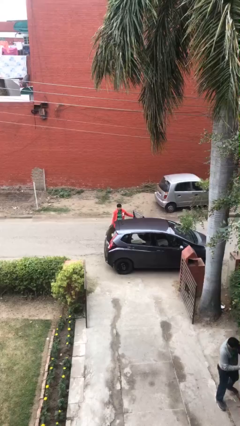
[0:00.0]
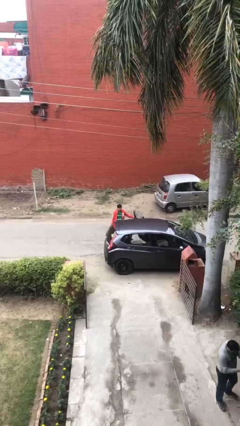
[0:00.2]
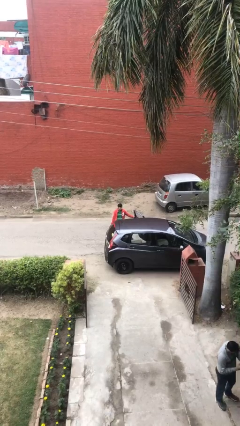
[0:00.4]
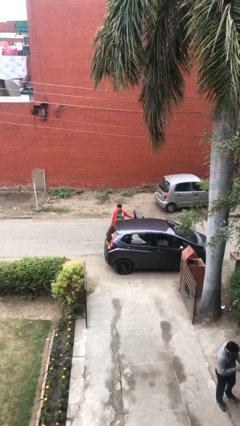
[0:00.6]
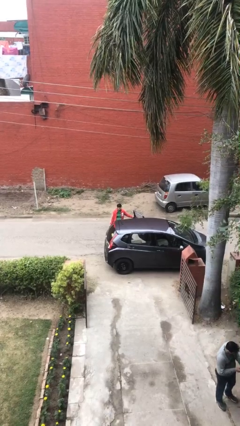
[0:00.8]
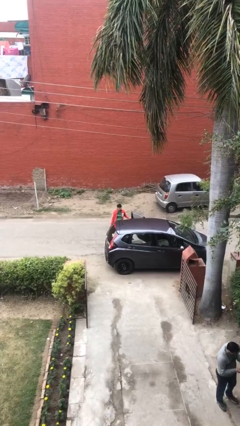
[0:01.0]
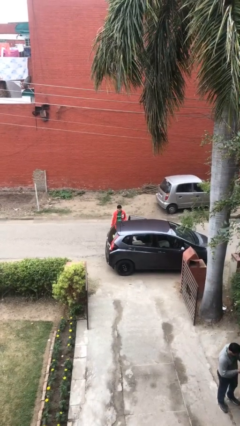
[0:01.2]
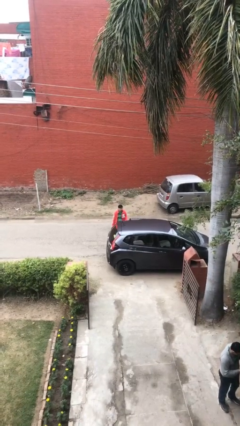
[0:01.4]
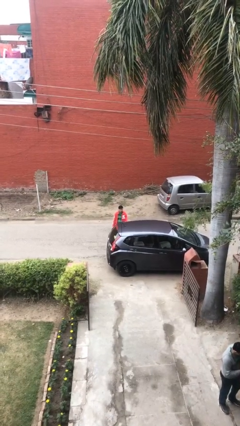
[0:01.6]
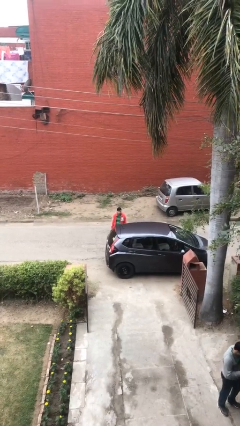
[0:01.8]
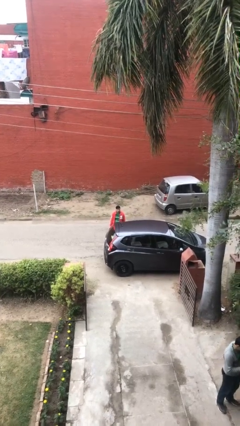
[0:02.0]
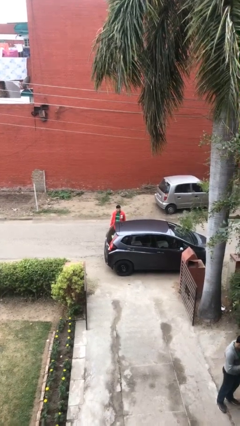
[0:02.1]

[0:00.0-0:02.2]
person closes car door

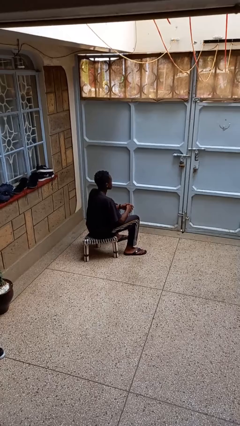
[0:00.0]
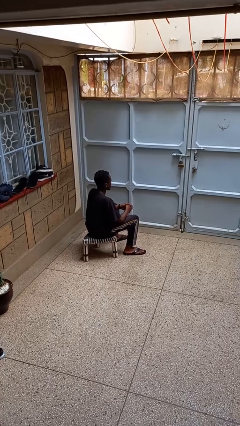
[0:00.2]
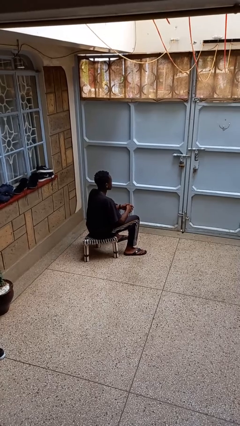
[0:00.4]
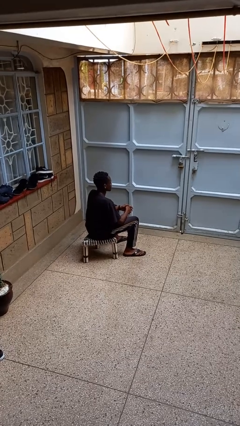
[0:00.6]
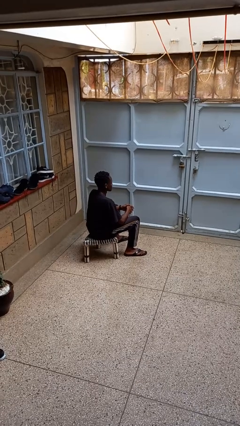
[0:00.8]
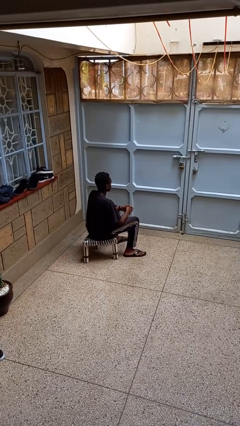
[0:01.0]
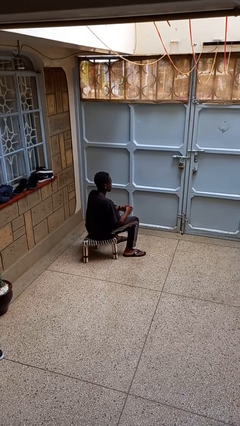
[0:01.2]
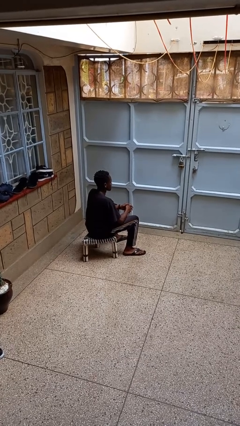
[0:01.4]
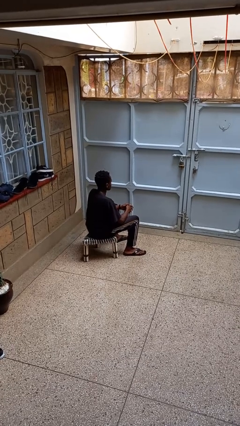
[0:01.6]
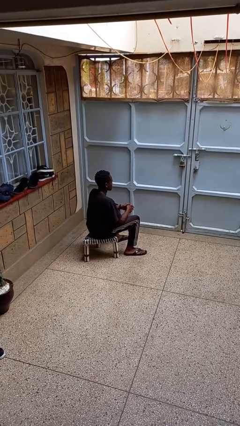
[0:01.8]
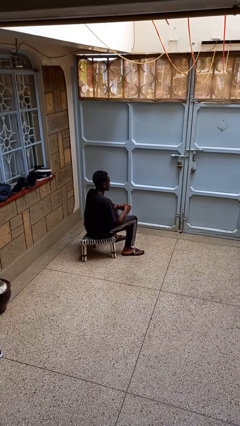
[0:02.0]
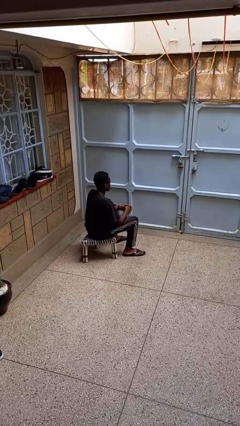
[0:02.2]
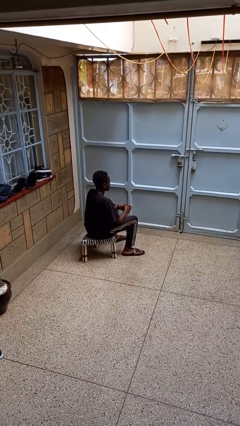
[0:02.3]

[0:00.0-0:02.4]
person shakes head

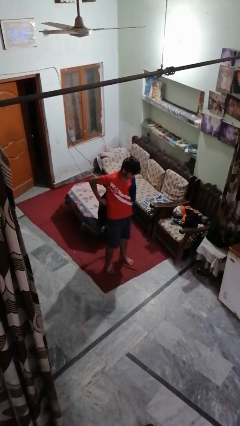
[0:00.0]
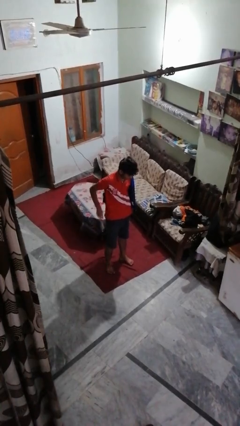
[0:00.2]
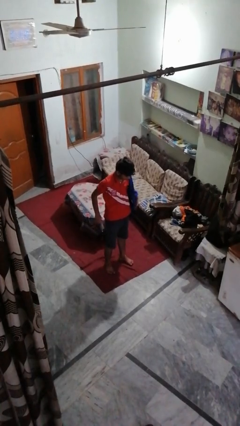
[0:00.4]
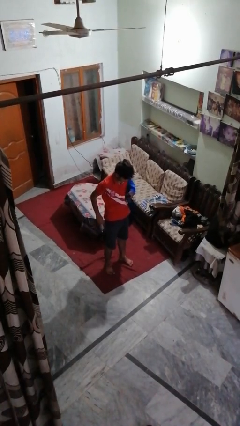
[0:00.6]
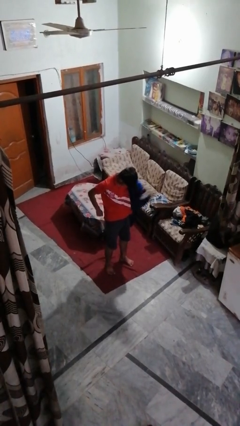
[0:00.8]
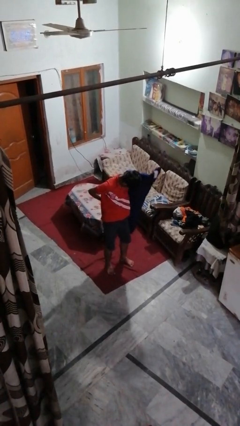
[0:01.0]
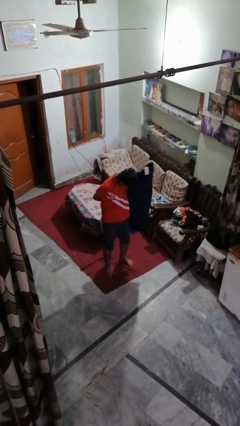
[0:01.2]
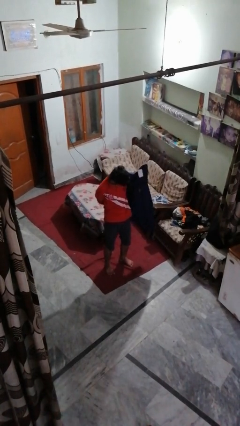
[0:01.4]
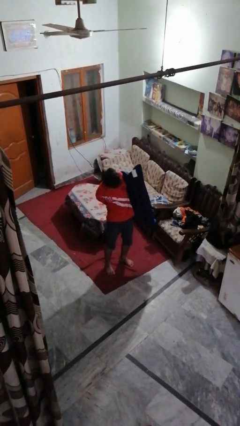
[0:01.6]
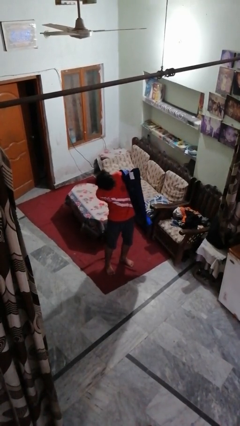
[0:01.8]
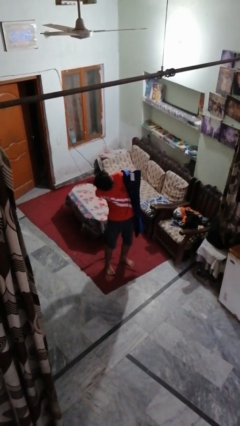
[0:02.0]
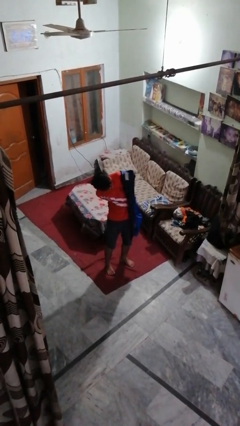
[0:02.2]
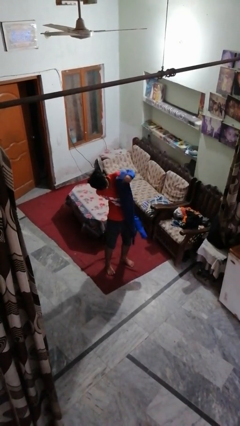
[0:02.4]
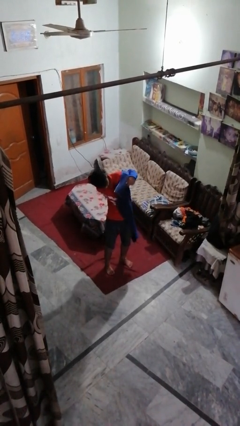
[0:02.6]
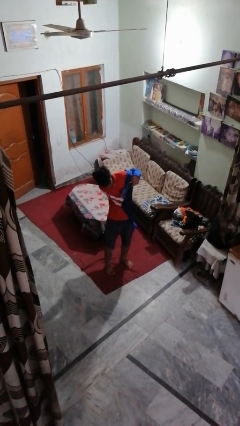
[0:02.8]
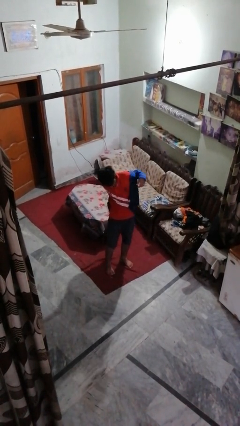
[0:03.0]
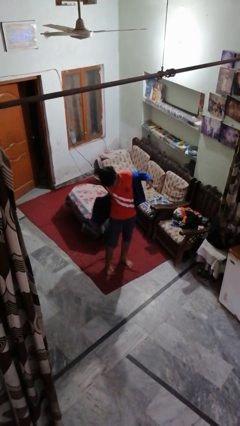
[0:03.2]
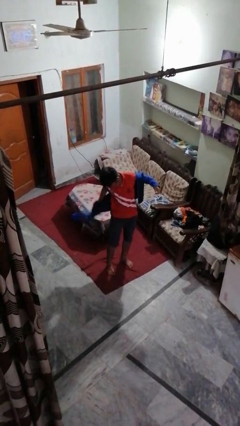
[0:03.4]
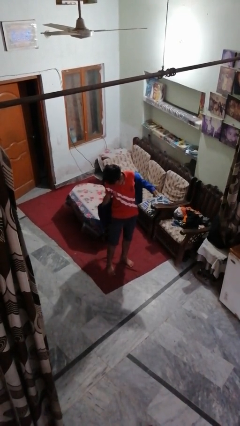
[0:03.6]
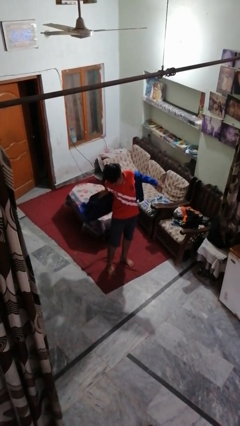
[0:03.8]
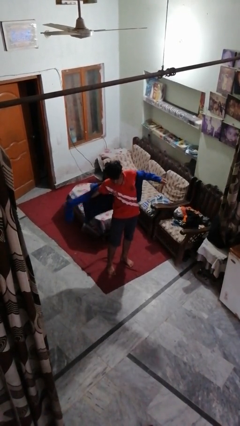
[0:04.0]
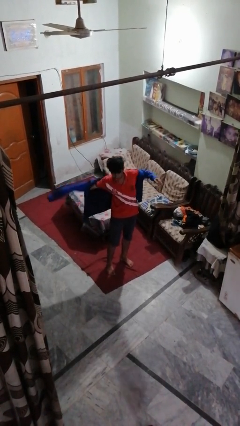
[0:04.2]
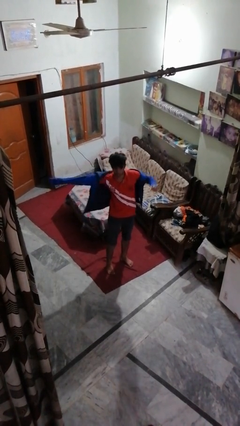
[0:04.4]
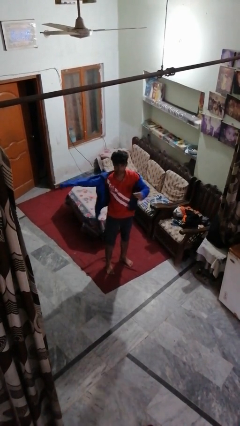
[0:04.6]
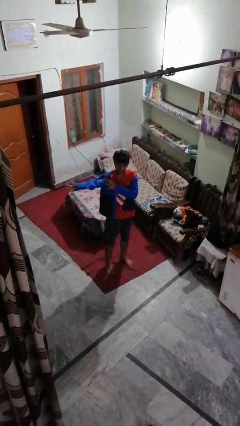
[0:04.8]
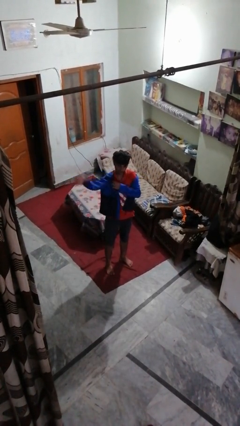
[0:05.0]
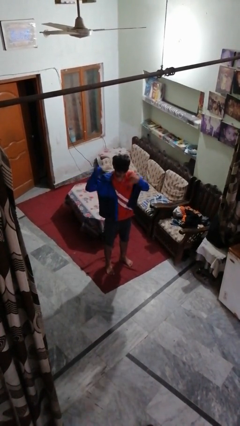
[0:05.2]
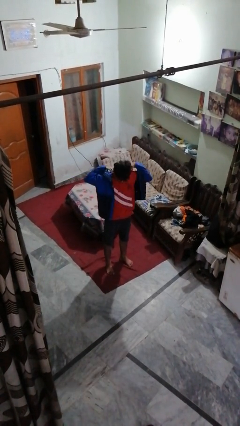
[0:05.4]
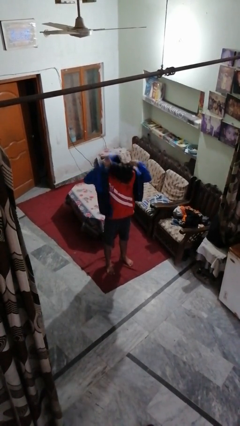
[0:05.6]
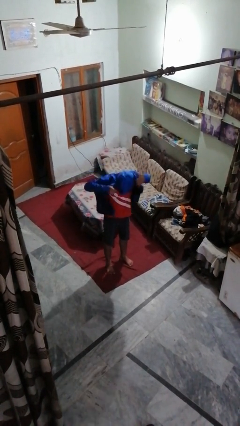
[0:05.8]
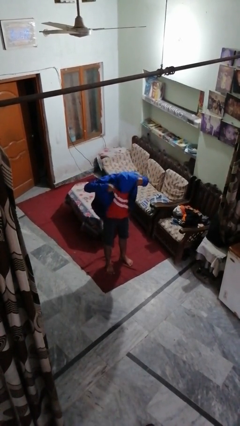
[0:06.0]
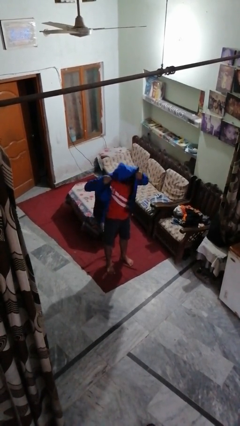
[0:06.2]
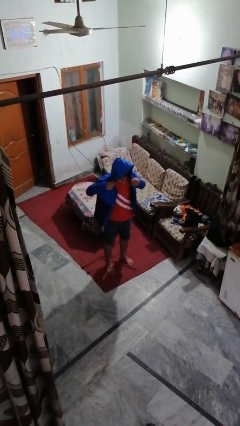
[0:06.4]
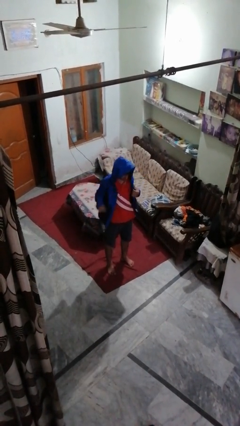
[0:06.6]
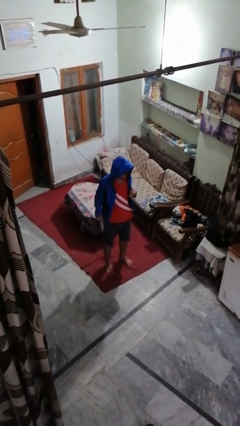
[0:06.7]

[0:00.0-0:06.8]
person puts on hoodie

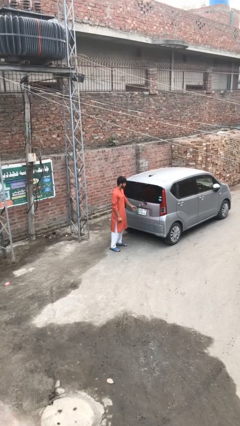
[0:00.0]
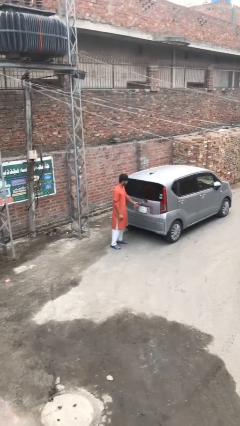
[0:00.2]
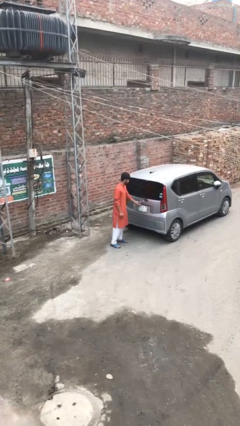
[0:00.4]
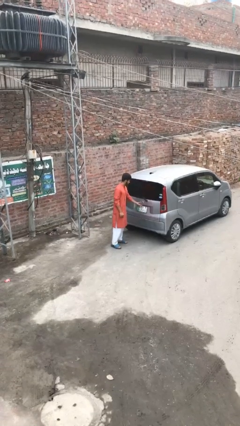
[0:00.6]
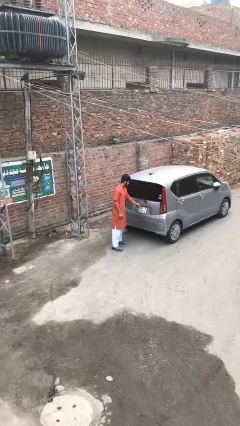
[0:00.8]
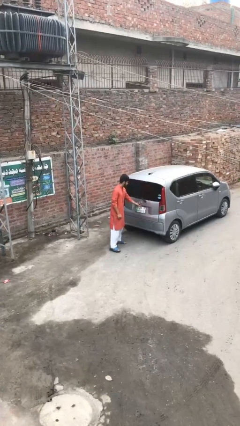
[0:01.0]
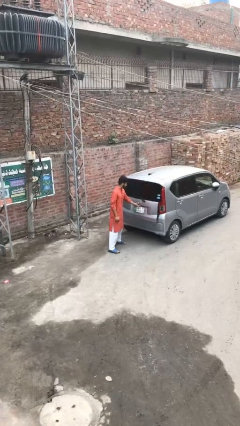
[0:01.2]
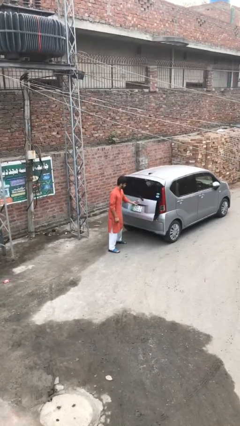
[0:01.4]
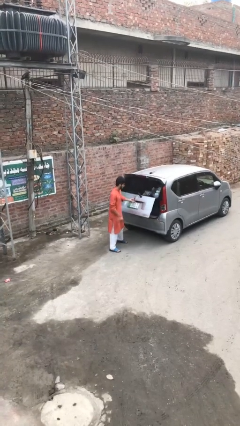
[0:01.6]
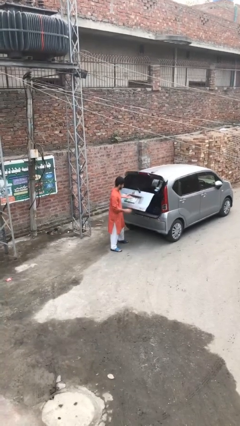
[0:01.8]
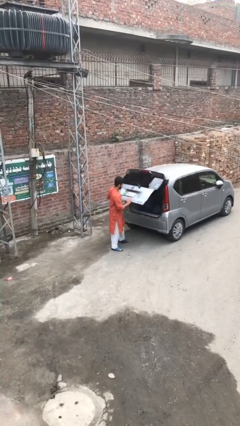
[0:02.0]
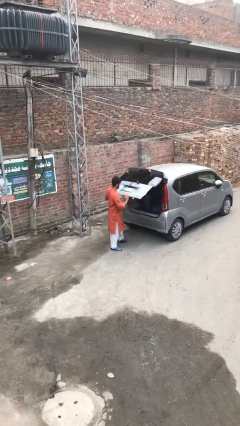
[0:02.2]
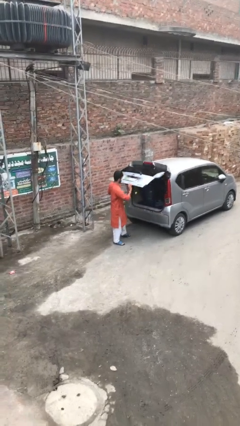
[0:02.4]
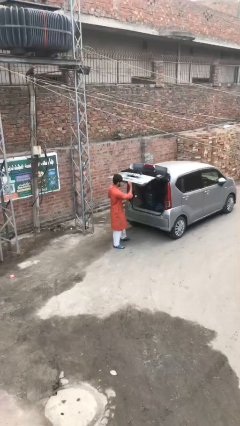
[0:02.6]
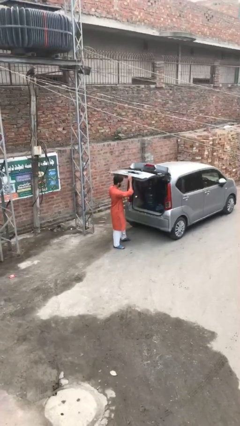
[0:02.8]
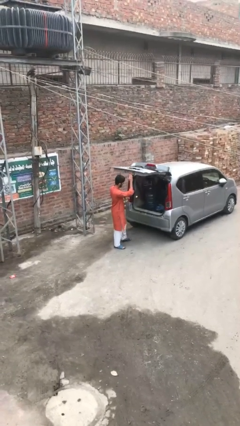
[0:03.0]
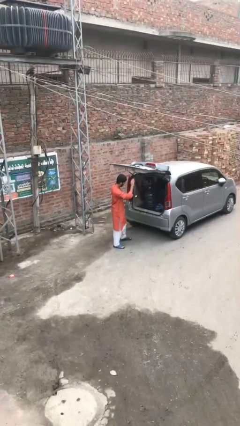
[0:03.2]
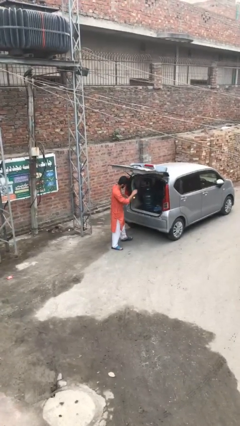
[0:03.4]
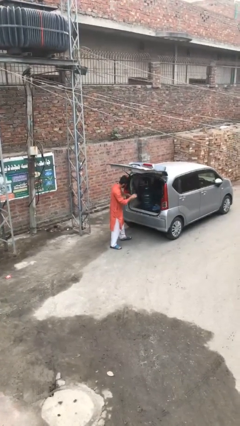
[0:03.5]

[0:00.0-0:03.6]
person opens car trunk

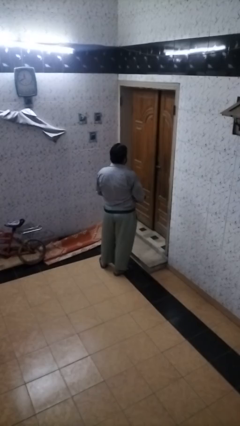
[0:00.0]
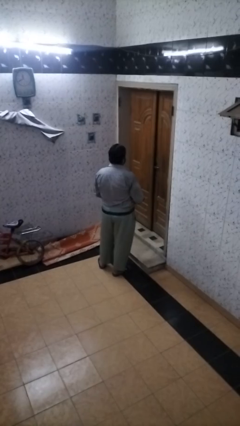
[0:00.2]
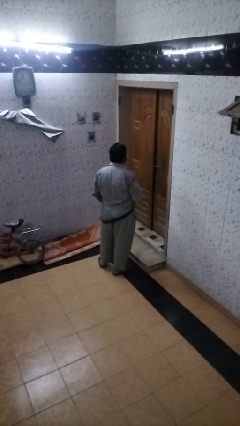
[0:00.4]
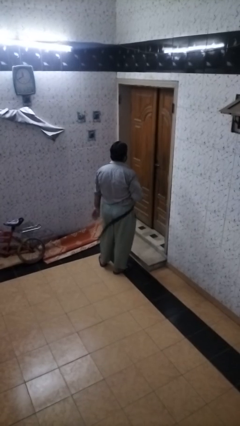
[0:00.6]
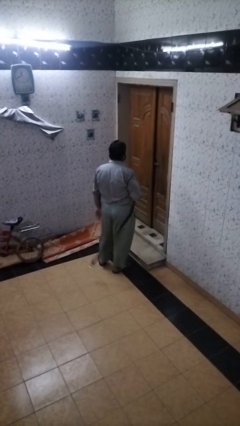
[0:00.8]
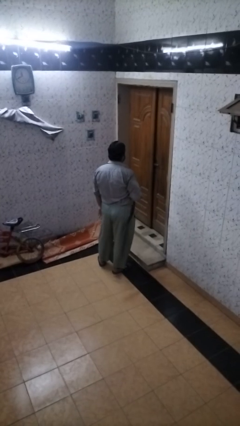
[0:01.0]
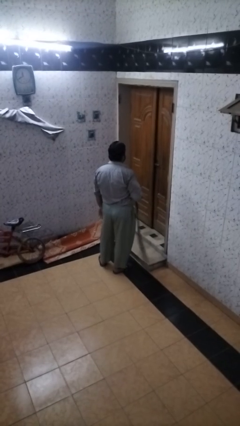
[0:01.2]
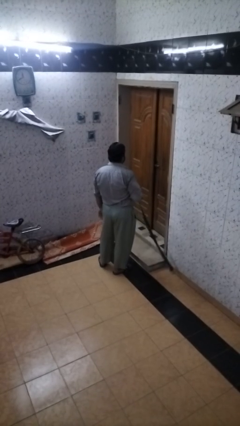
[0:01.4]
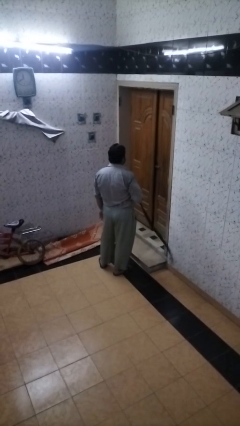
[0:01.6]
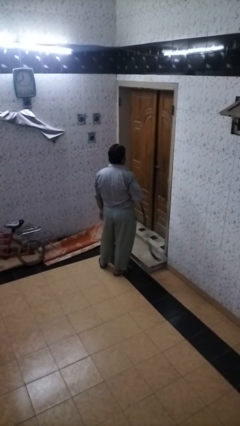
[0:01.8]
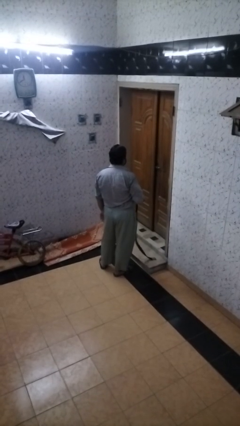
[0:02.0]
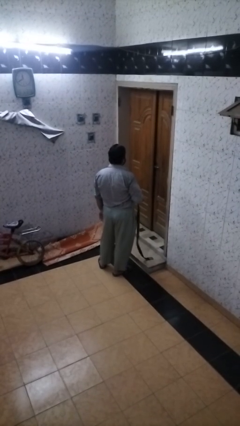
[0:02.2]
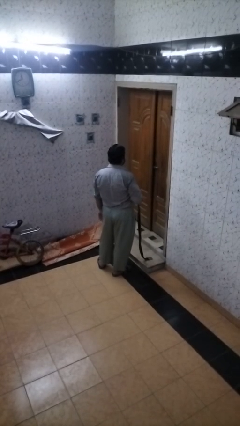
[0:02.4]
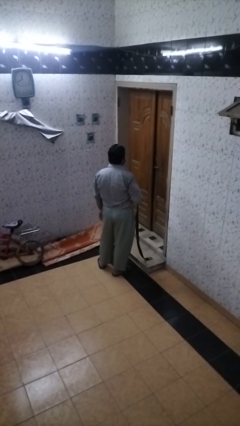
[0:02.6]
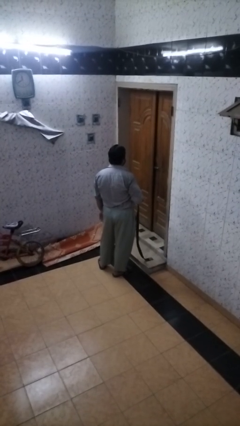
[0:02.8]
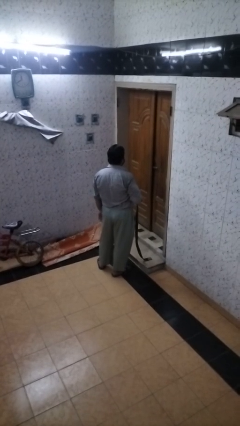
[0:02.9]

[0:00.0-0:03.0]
person takes off belt
